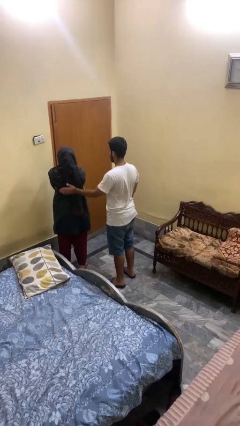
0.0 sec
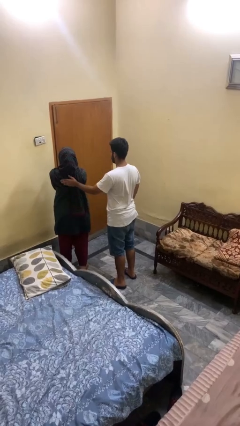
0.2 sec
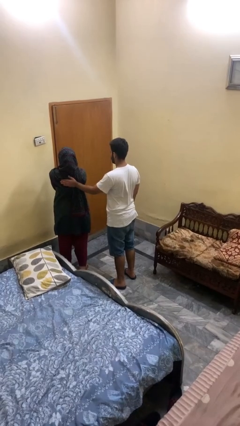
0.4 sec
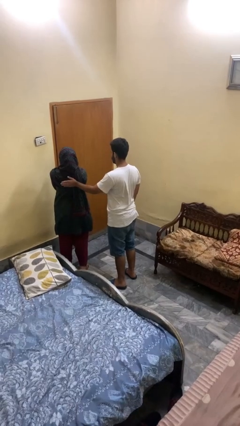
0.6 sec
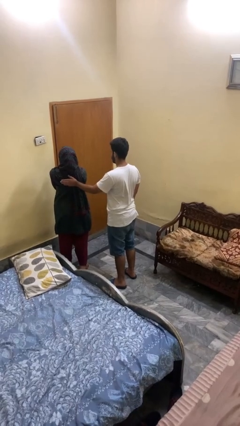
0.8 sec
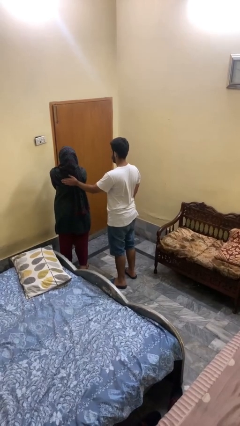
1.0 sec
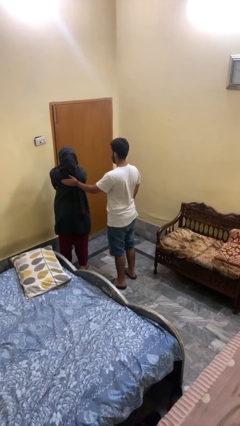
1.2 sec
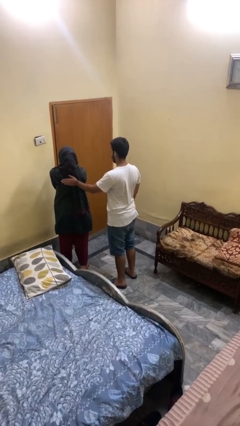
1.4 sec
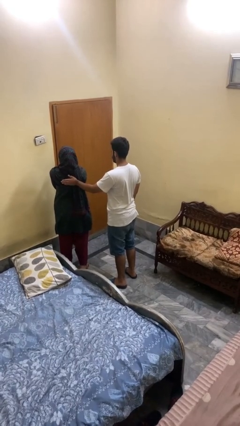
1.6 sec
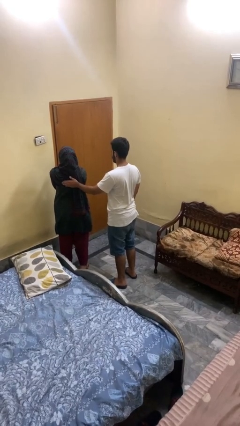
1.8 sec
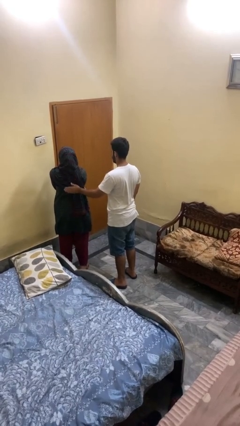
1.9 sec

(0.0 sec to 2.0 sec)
person touches back of person

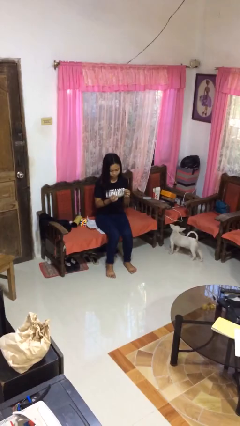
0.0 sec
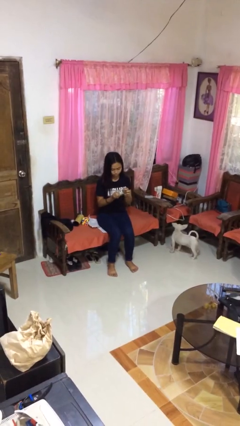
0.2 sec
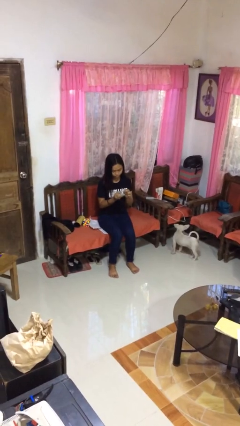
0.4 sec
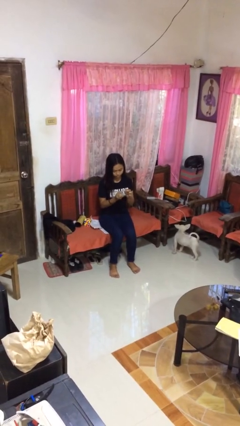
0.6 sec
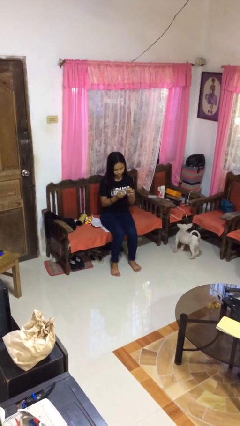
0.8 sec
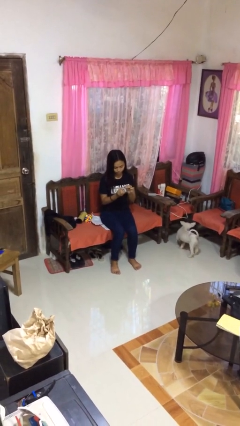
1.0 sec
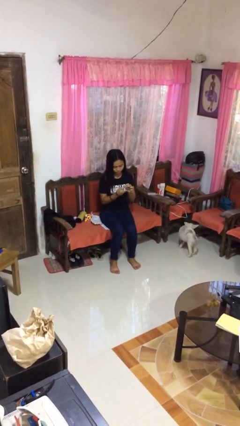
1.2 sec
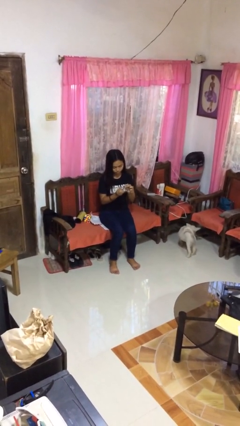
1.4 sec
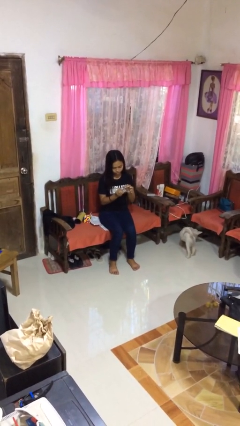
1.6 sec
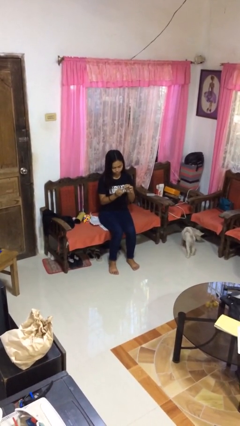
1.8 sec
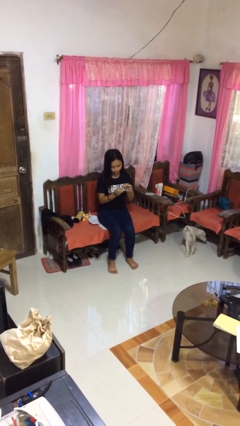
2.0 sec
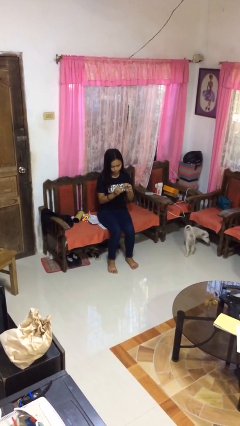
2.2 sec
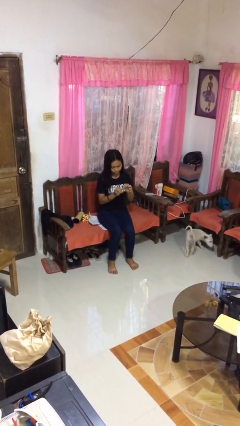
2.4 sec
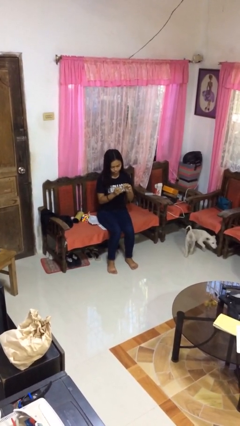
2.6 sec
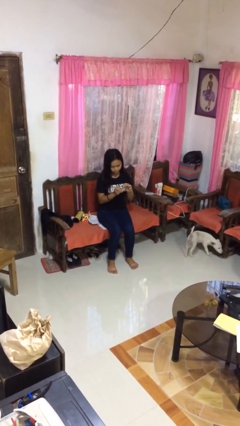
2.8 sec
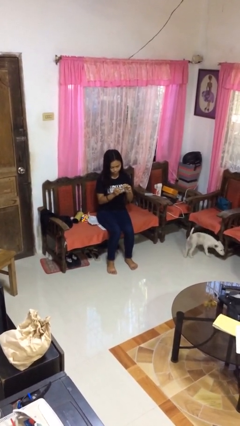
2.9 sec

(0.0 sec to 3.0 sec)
person clips fingernails

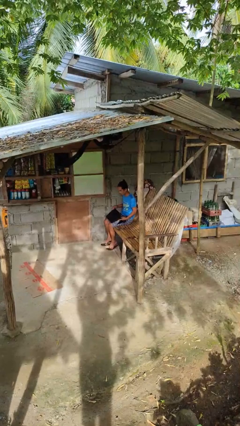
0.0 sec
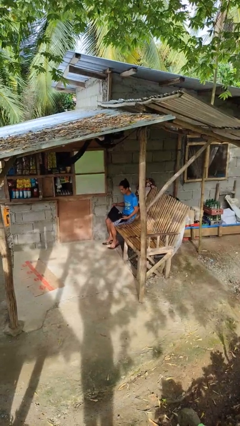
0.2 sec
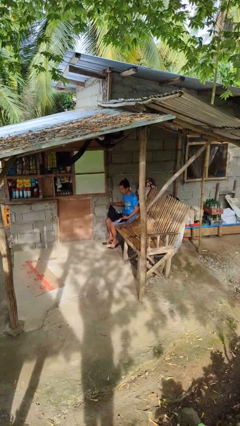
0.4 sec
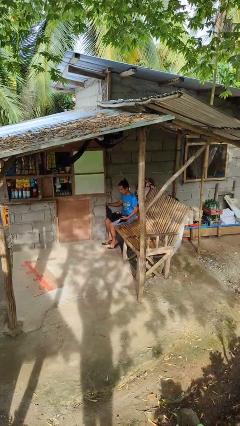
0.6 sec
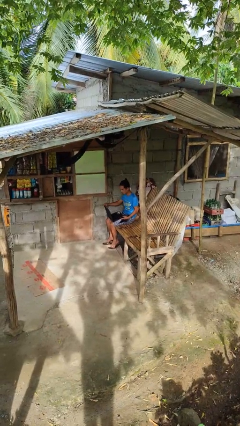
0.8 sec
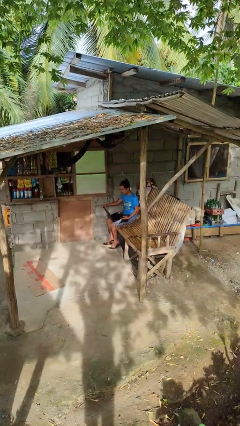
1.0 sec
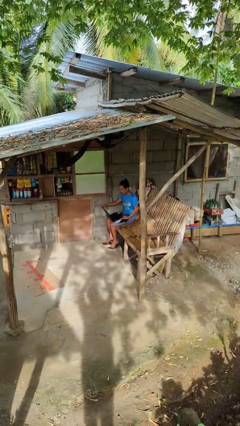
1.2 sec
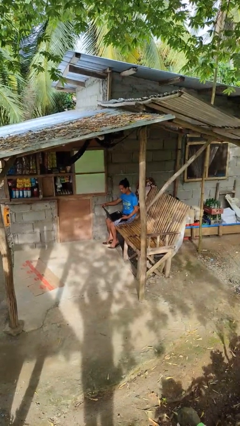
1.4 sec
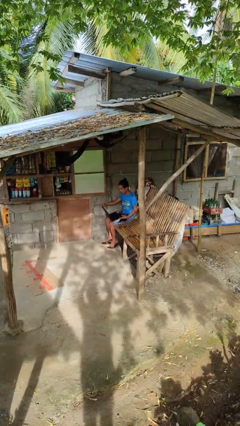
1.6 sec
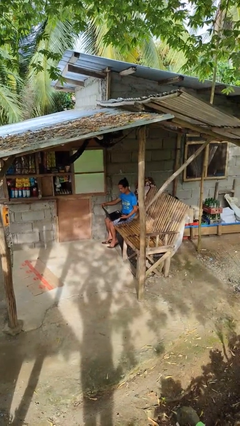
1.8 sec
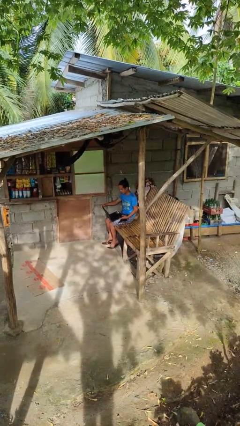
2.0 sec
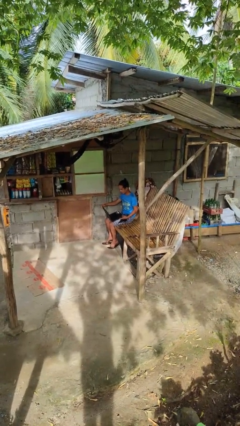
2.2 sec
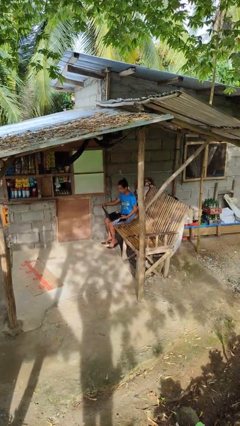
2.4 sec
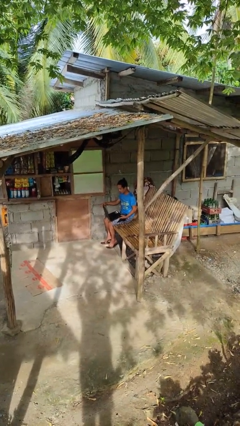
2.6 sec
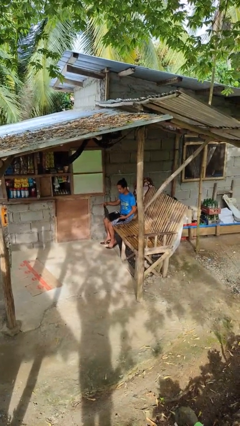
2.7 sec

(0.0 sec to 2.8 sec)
person opens laptop

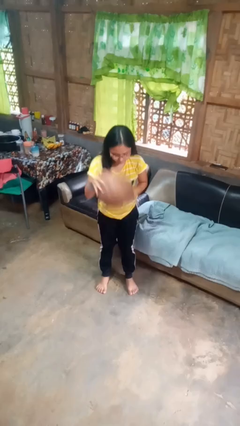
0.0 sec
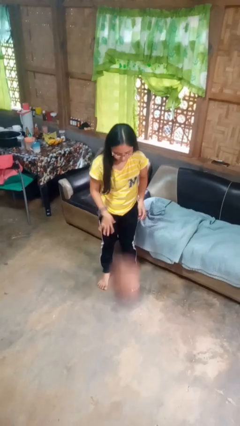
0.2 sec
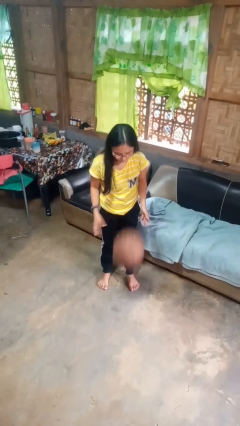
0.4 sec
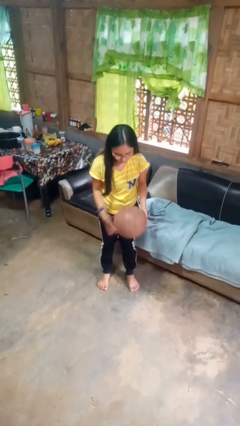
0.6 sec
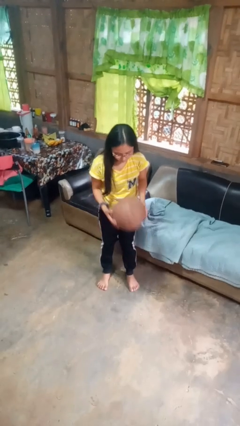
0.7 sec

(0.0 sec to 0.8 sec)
person bounces ball on floor

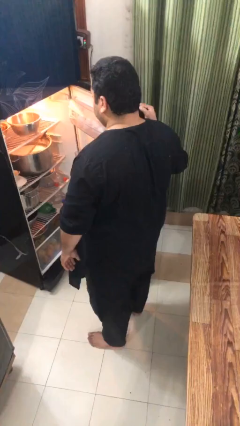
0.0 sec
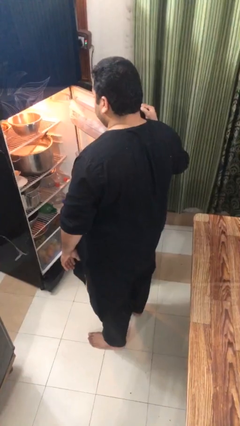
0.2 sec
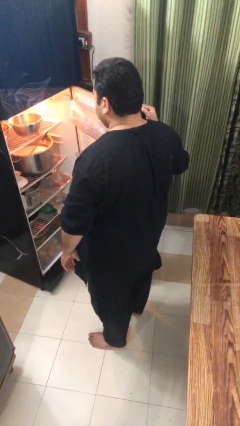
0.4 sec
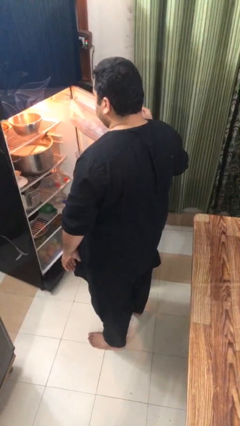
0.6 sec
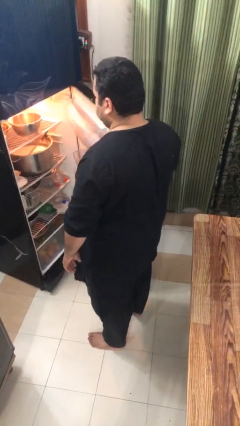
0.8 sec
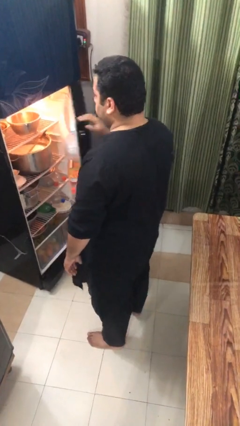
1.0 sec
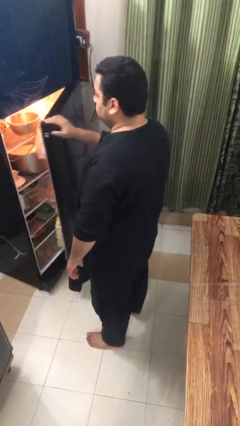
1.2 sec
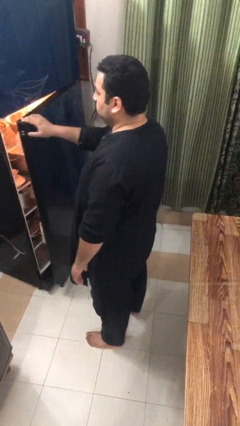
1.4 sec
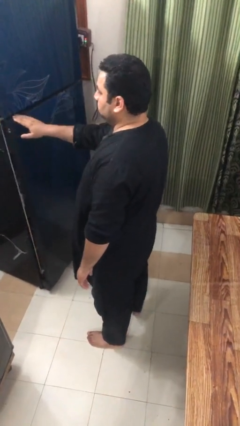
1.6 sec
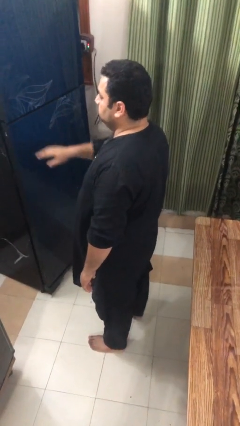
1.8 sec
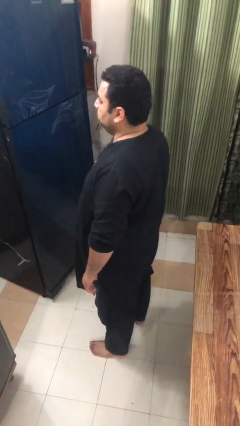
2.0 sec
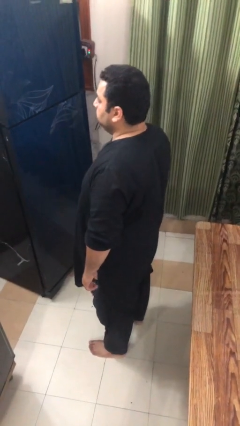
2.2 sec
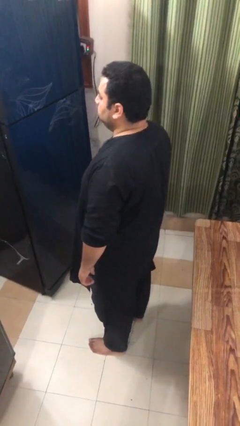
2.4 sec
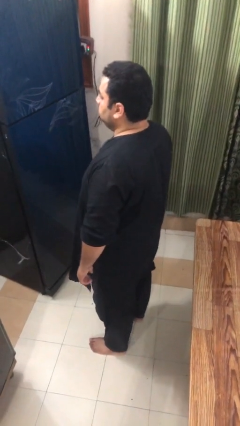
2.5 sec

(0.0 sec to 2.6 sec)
person closes refrigerator

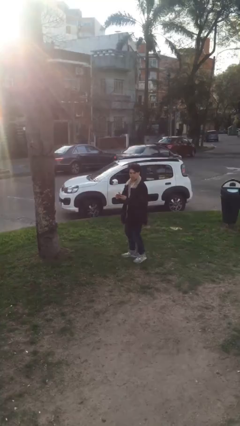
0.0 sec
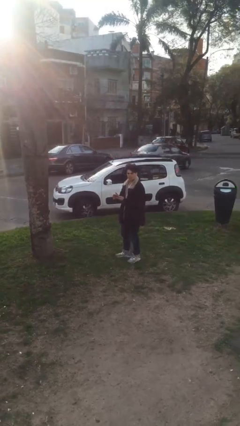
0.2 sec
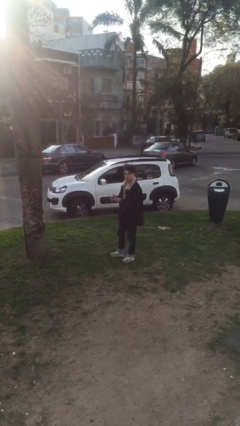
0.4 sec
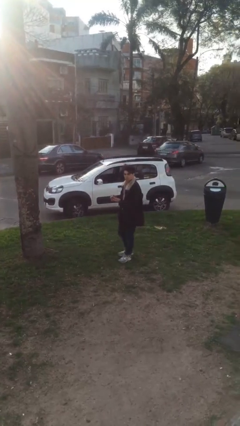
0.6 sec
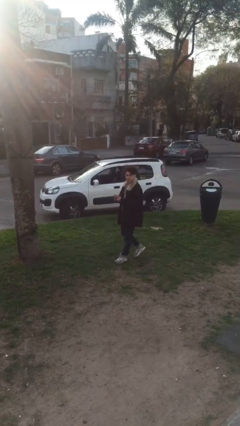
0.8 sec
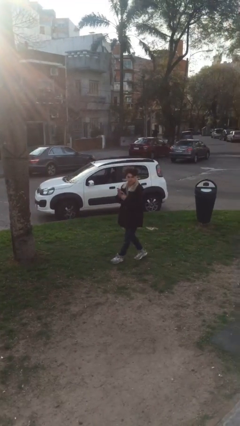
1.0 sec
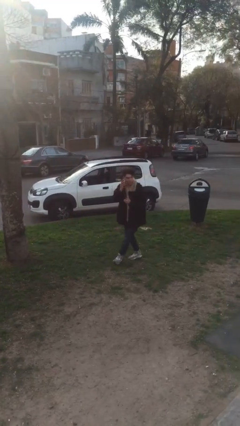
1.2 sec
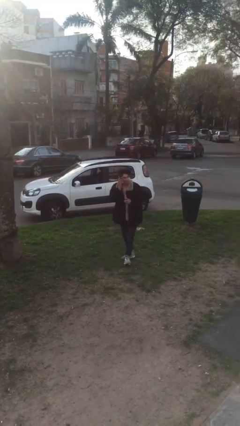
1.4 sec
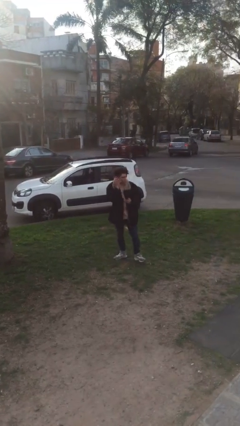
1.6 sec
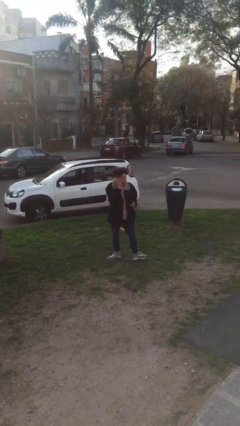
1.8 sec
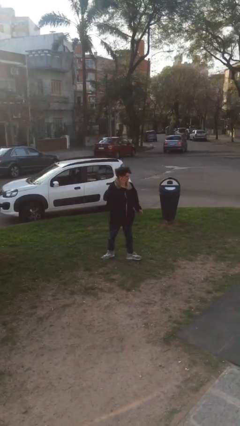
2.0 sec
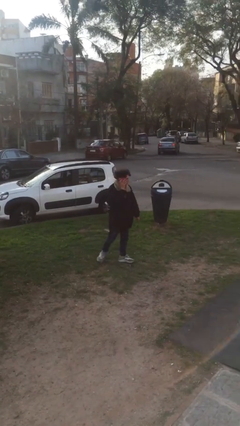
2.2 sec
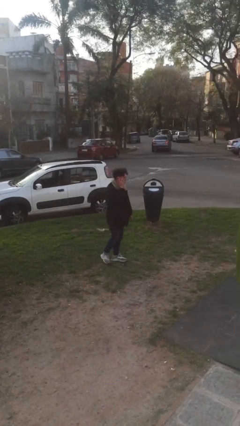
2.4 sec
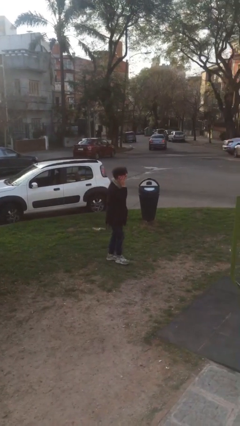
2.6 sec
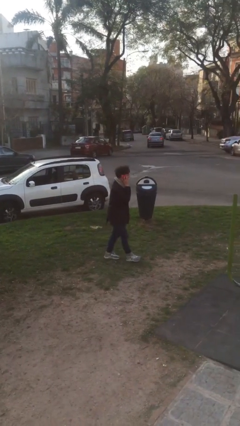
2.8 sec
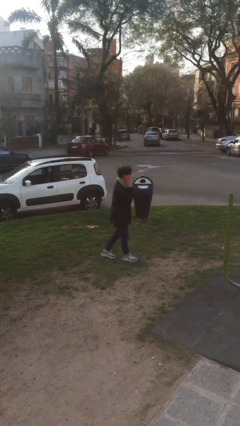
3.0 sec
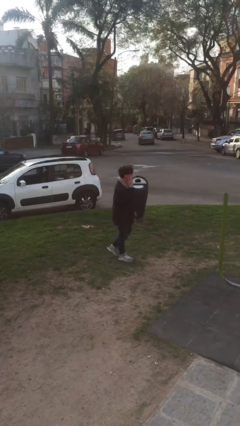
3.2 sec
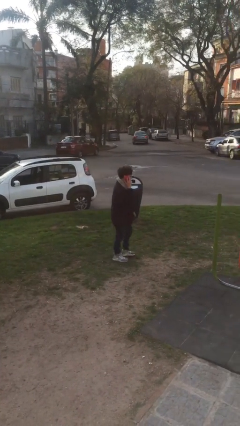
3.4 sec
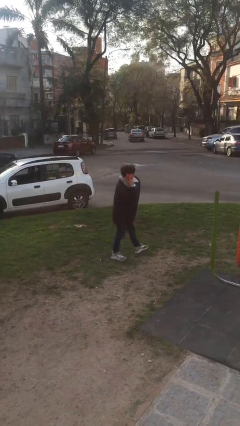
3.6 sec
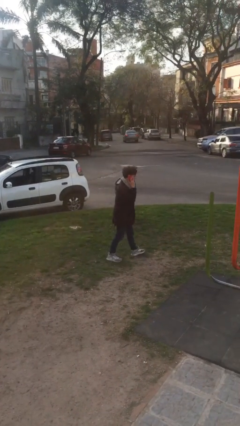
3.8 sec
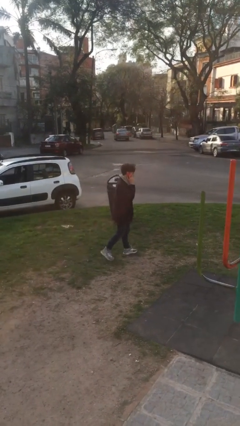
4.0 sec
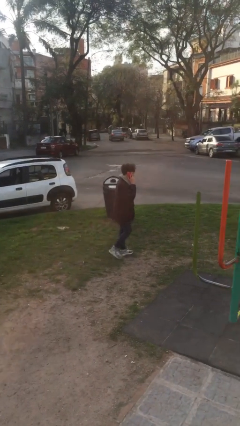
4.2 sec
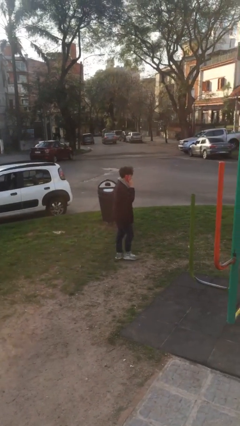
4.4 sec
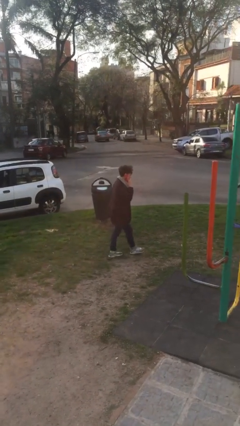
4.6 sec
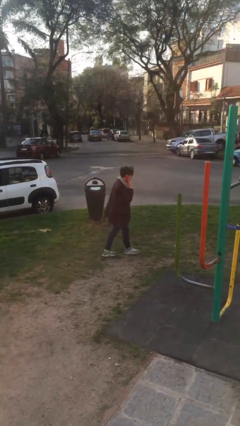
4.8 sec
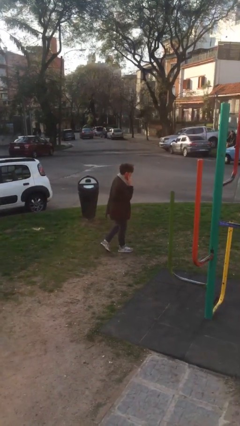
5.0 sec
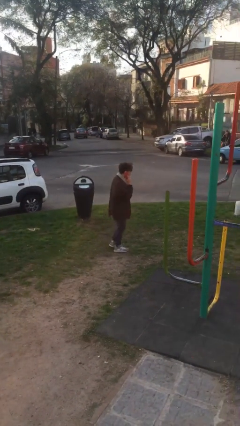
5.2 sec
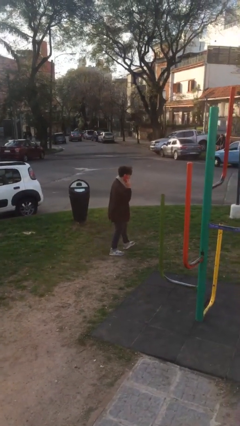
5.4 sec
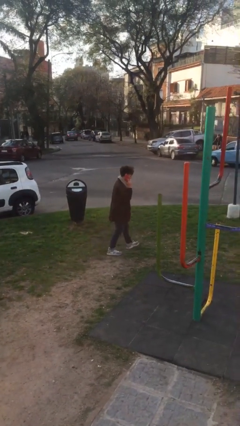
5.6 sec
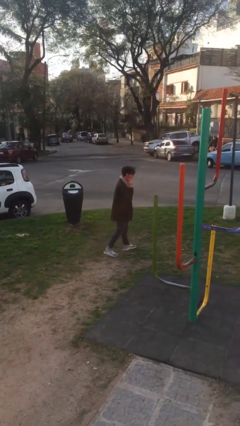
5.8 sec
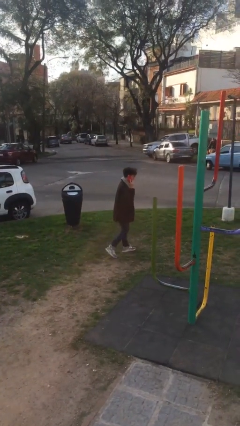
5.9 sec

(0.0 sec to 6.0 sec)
person talks on phone
